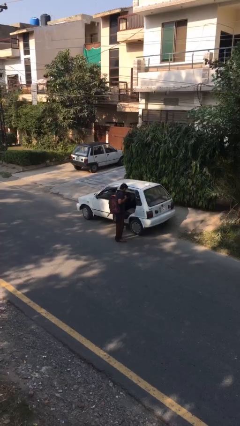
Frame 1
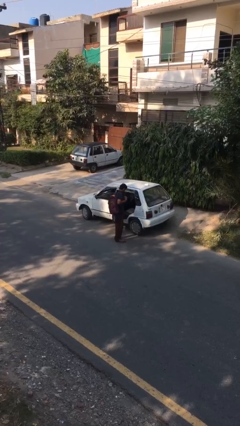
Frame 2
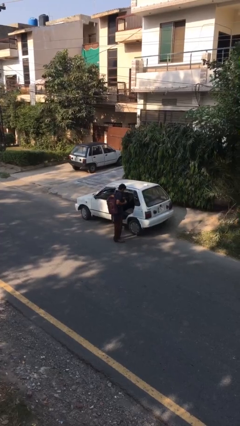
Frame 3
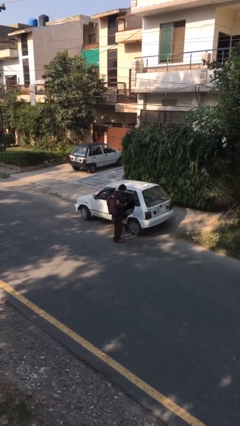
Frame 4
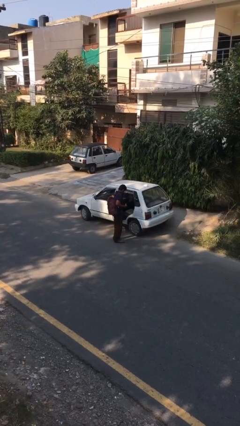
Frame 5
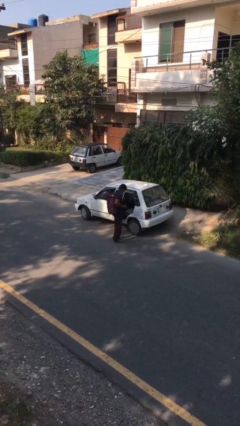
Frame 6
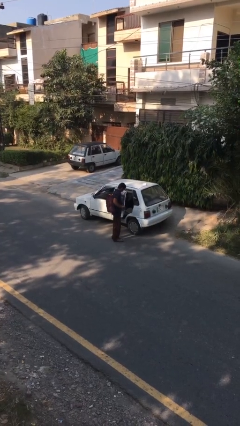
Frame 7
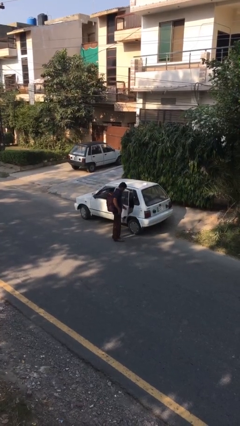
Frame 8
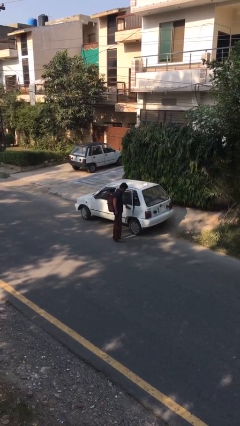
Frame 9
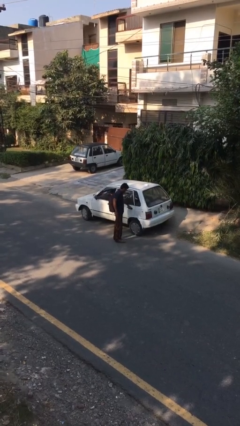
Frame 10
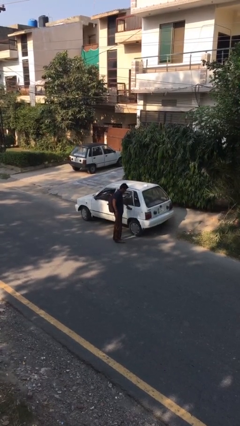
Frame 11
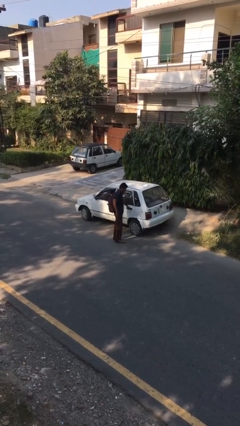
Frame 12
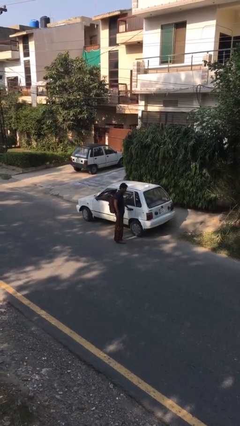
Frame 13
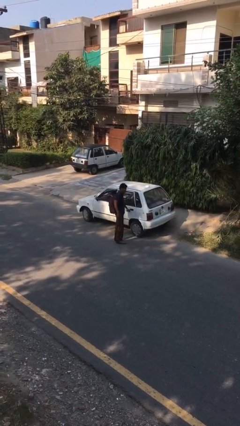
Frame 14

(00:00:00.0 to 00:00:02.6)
person closes car door

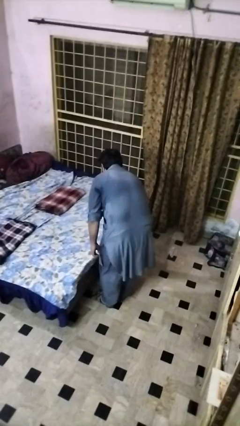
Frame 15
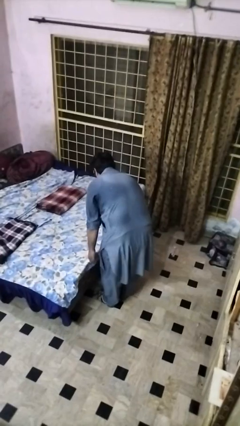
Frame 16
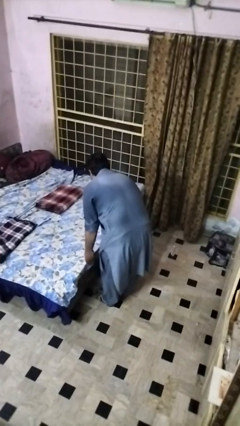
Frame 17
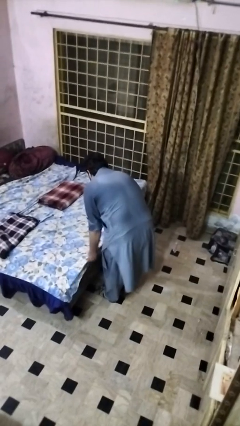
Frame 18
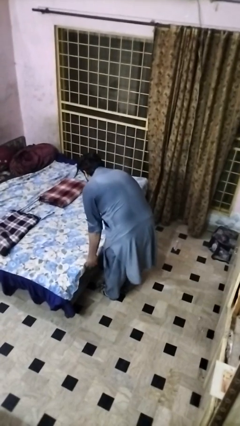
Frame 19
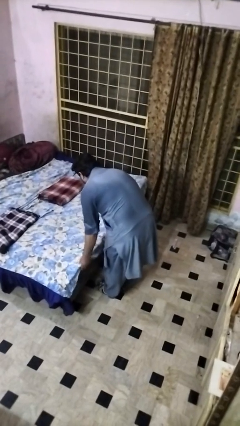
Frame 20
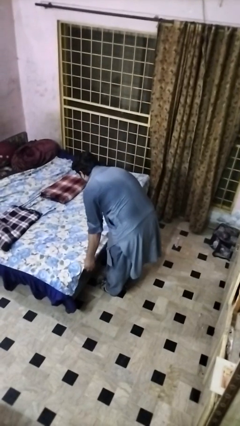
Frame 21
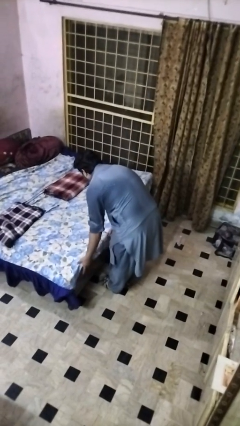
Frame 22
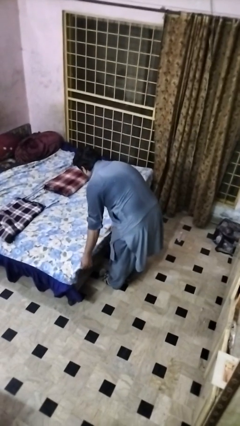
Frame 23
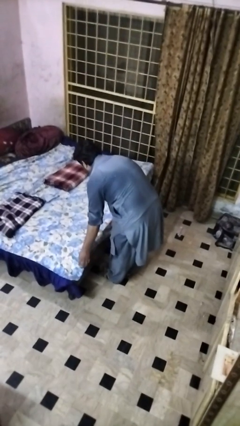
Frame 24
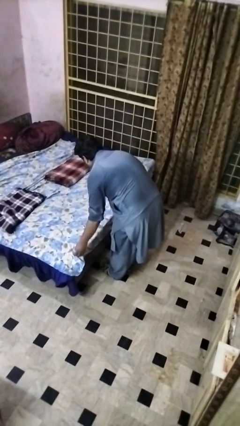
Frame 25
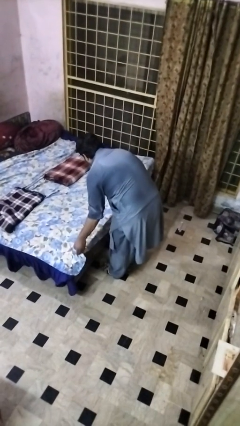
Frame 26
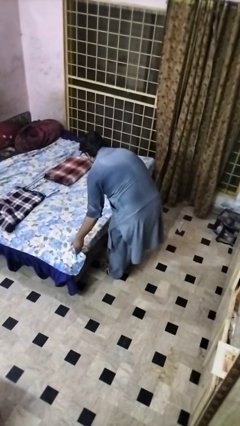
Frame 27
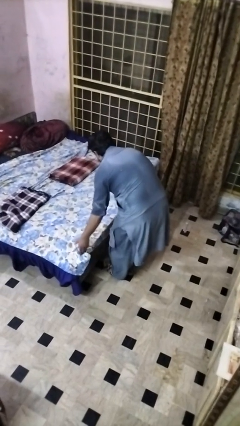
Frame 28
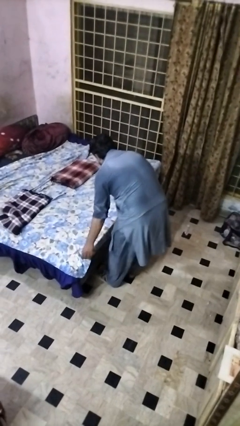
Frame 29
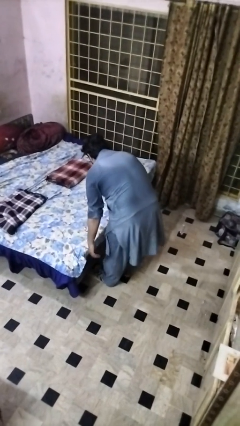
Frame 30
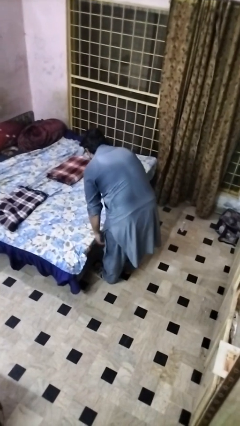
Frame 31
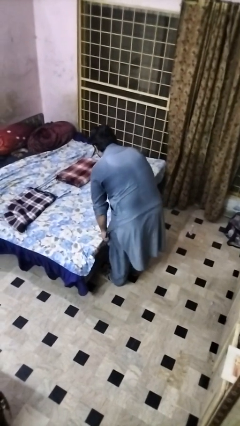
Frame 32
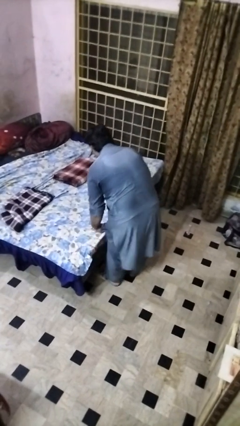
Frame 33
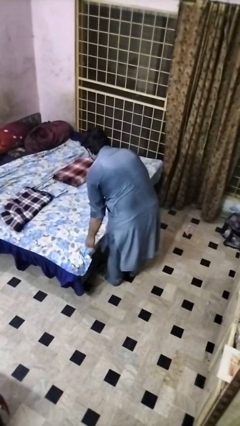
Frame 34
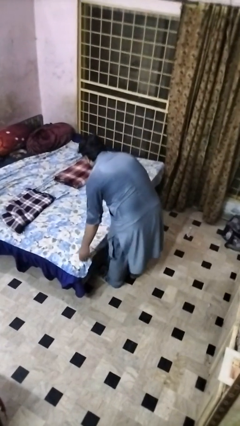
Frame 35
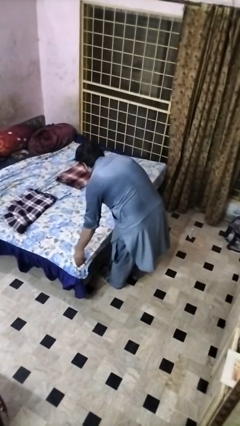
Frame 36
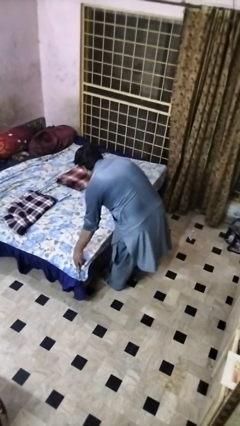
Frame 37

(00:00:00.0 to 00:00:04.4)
person makes bed

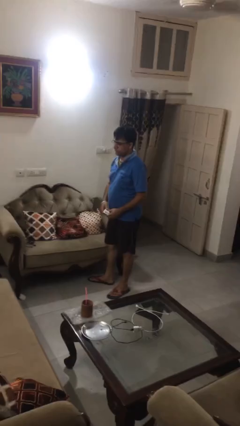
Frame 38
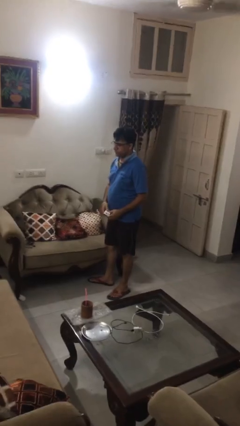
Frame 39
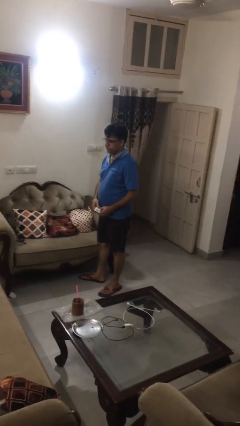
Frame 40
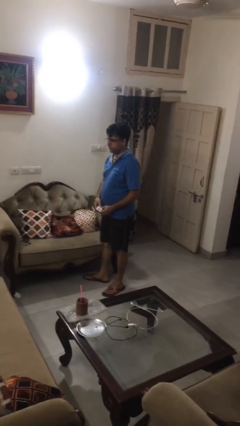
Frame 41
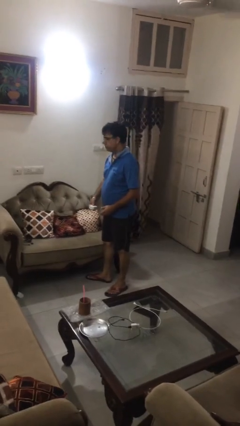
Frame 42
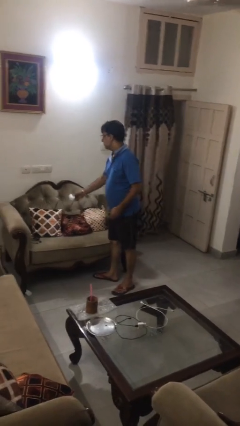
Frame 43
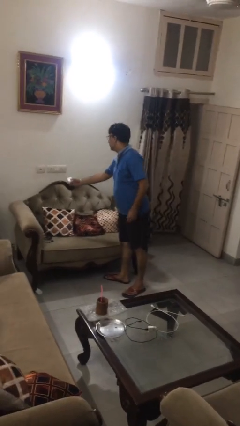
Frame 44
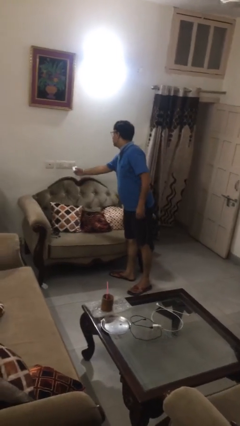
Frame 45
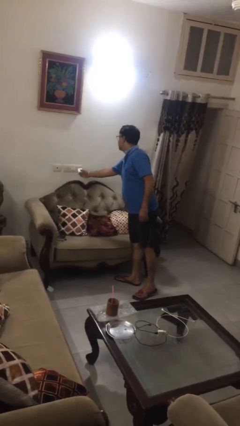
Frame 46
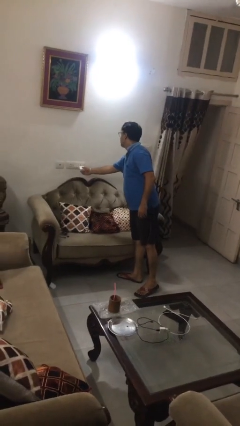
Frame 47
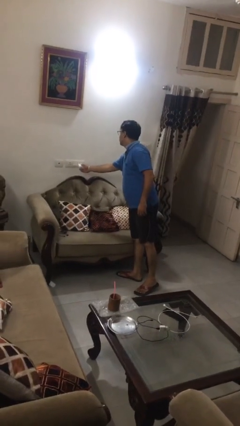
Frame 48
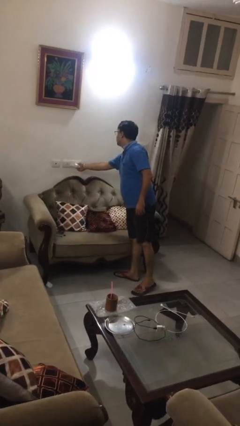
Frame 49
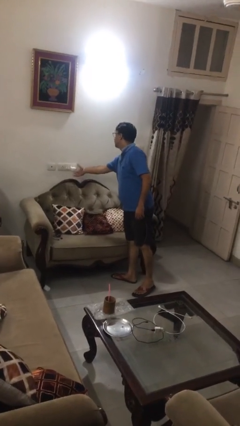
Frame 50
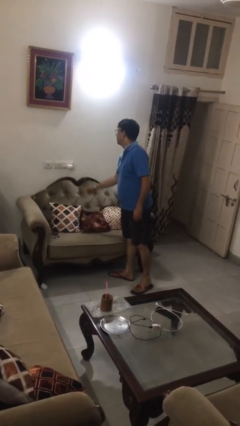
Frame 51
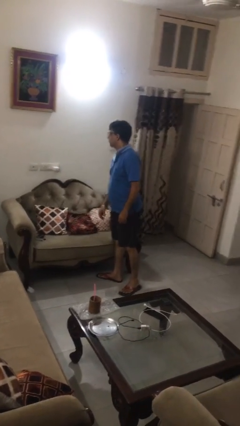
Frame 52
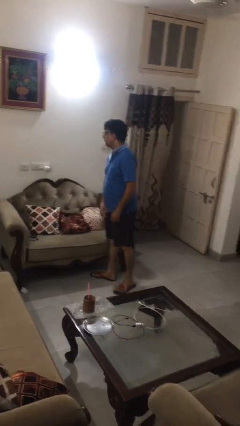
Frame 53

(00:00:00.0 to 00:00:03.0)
person plugs into electrical socket

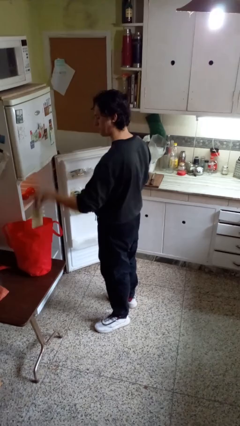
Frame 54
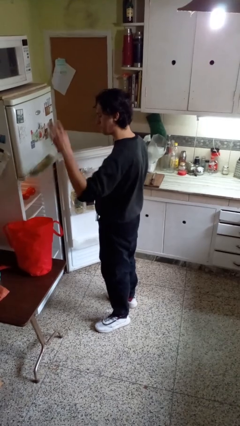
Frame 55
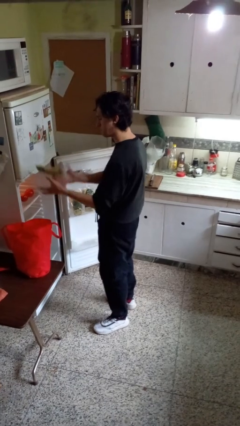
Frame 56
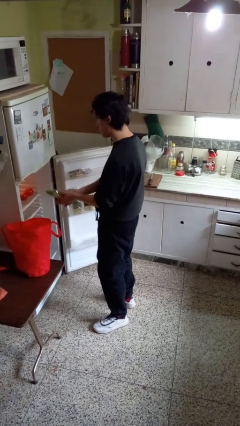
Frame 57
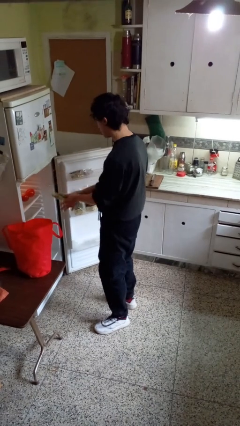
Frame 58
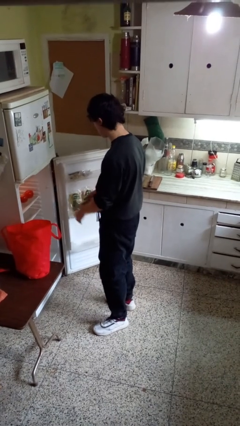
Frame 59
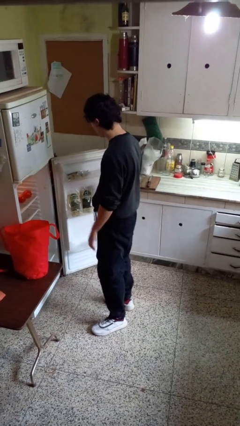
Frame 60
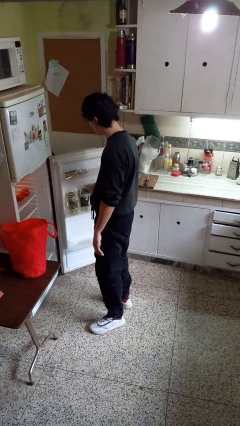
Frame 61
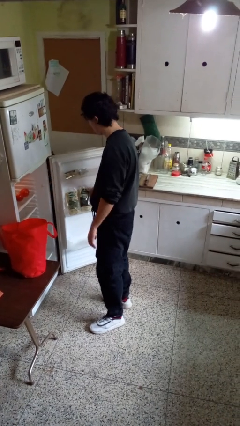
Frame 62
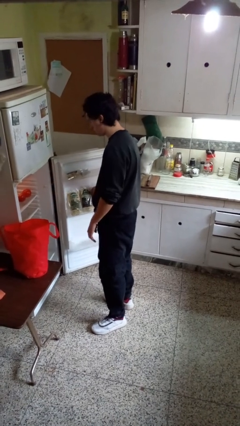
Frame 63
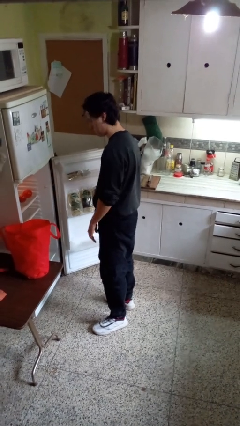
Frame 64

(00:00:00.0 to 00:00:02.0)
person loads groceries into refrigerator

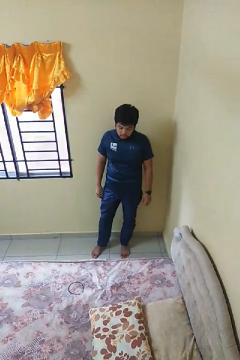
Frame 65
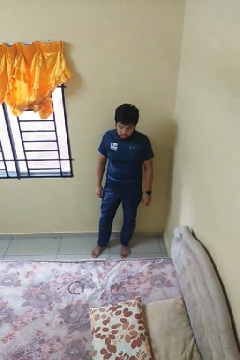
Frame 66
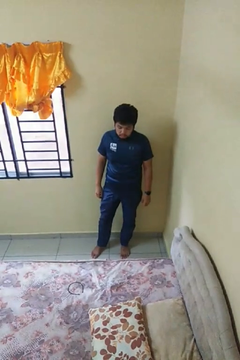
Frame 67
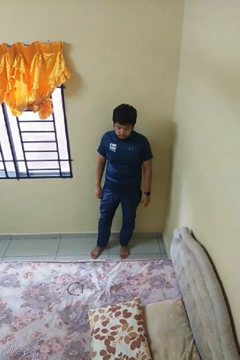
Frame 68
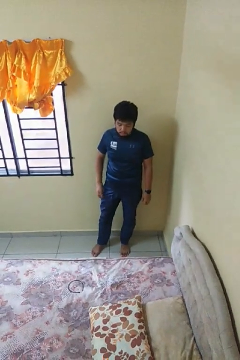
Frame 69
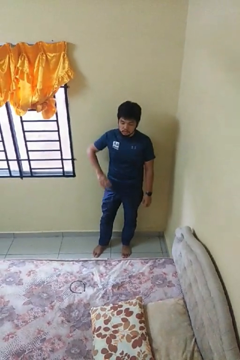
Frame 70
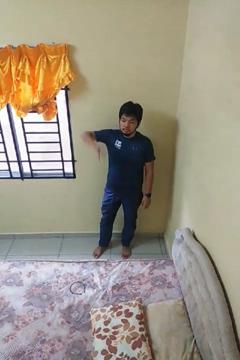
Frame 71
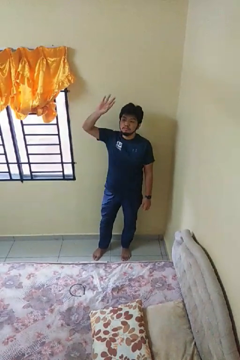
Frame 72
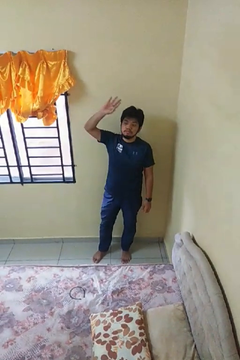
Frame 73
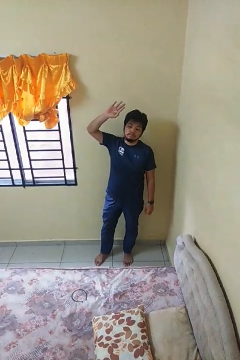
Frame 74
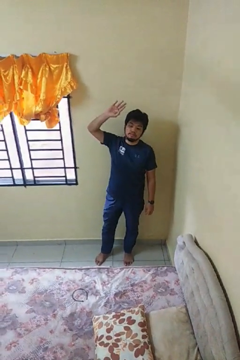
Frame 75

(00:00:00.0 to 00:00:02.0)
person gestures swipe up

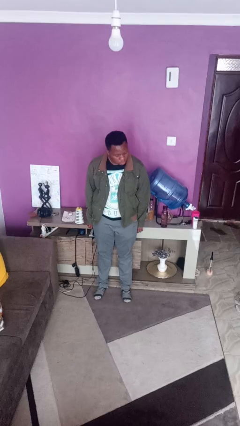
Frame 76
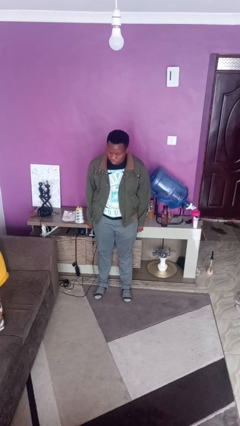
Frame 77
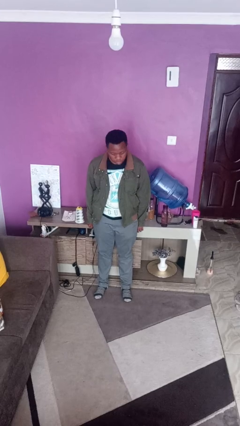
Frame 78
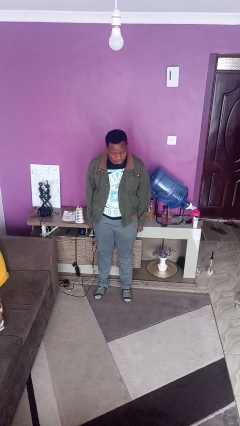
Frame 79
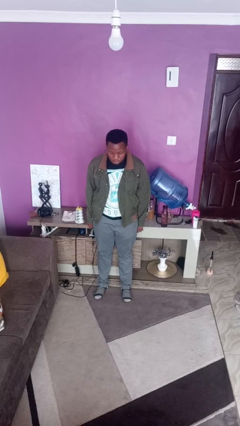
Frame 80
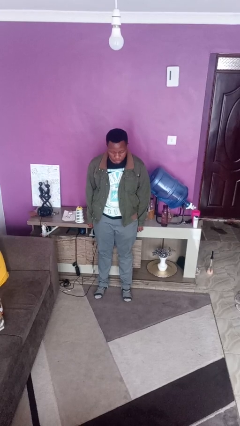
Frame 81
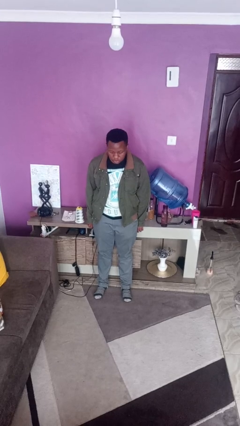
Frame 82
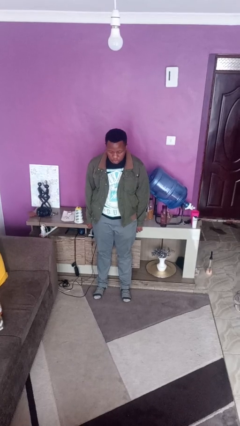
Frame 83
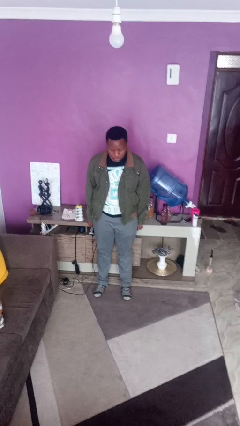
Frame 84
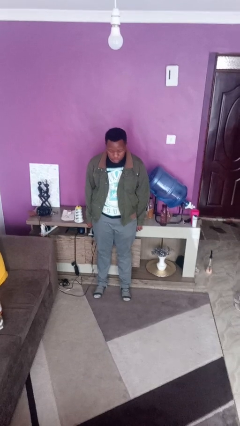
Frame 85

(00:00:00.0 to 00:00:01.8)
person shakes head

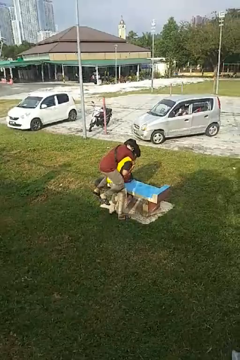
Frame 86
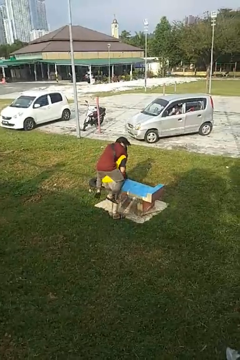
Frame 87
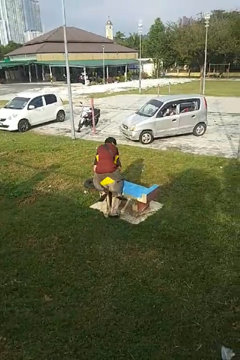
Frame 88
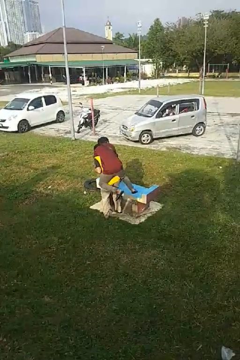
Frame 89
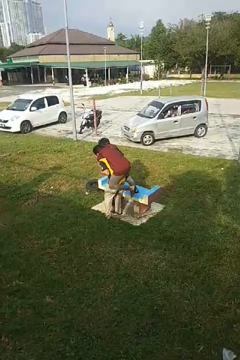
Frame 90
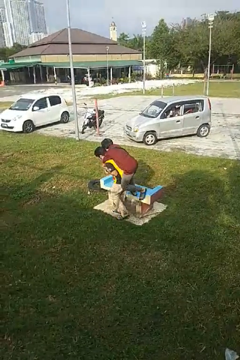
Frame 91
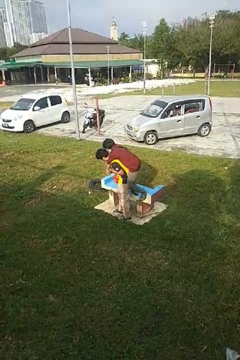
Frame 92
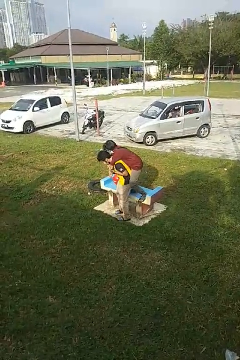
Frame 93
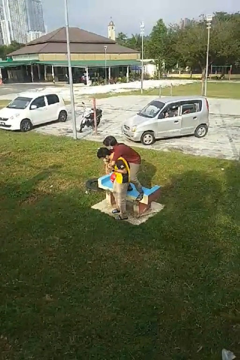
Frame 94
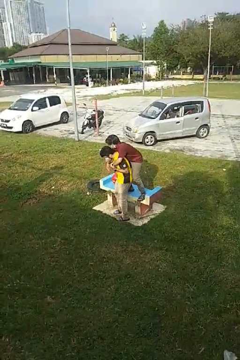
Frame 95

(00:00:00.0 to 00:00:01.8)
person puts down person

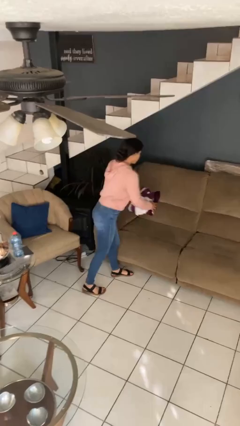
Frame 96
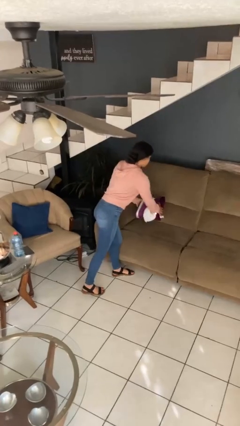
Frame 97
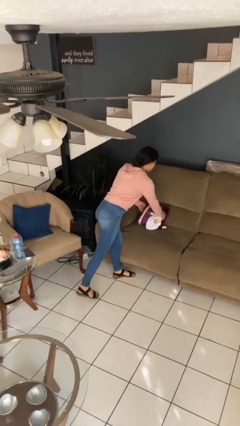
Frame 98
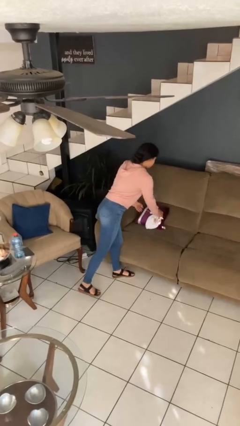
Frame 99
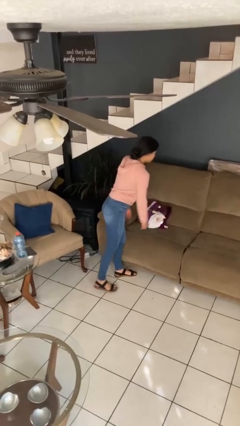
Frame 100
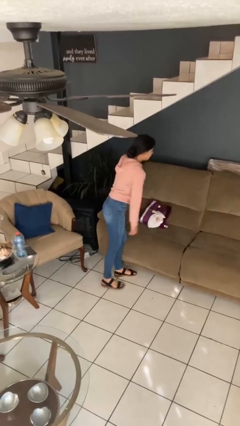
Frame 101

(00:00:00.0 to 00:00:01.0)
person puts down object on couch
